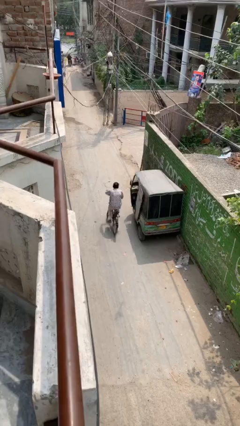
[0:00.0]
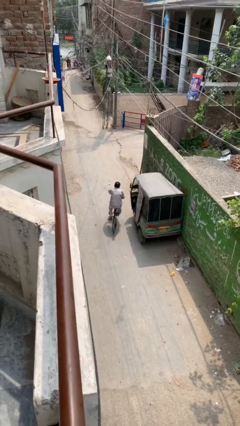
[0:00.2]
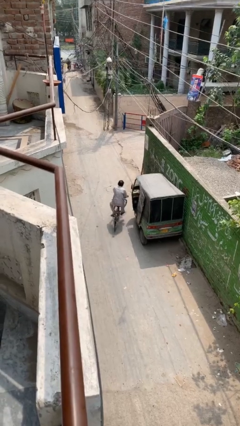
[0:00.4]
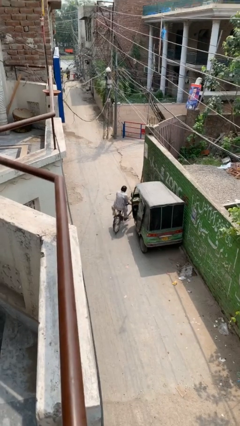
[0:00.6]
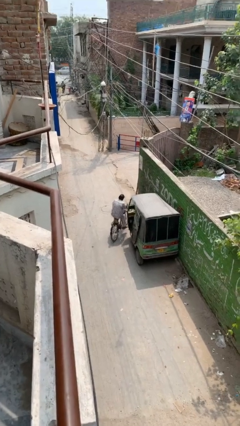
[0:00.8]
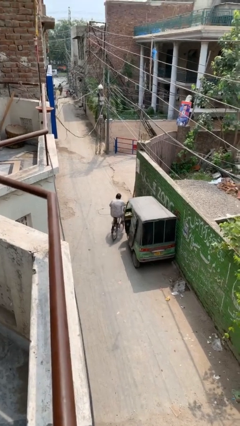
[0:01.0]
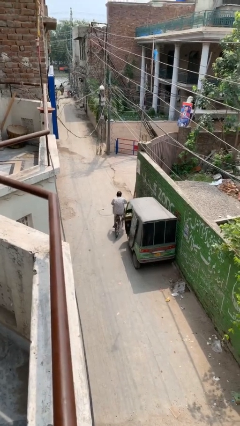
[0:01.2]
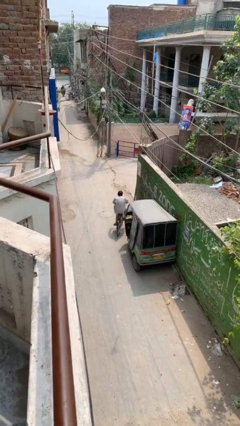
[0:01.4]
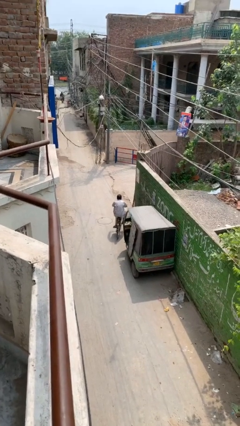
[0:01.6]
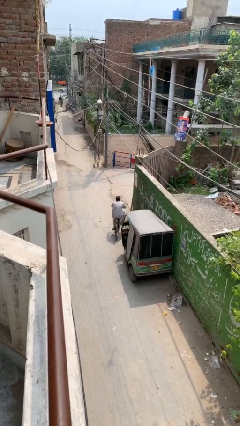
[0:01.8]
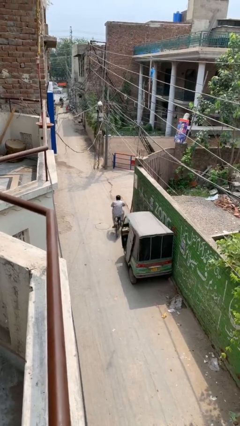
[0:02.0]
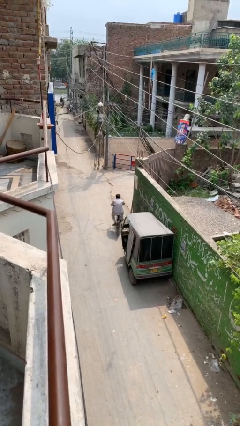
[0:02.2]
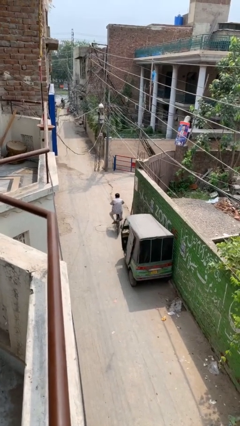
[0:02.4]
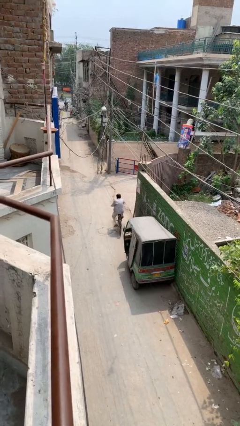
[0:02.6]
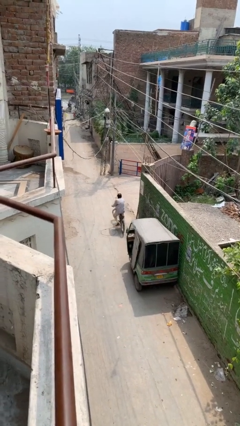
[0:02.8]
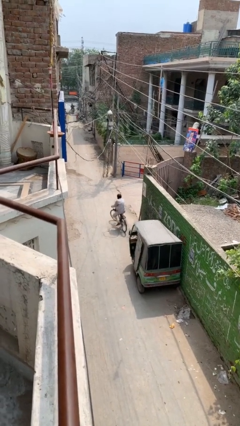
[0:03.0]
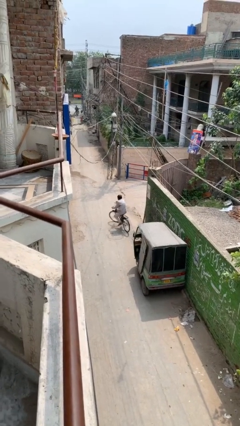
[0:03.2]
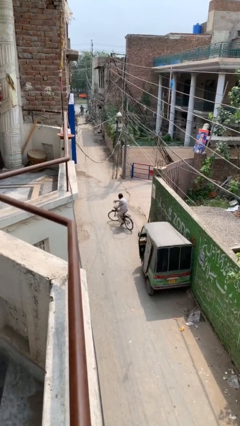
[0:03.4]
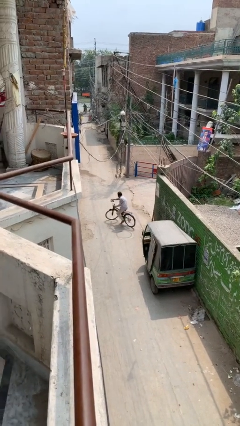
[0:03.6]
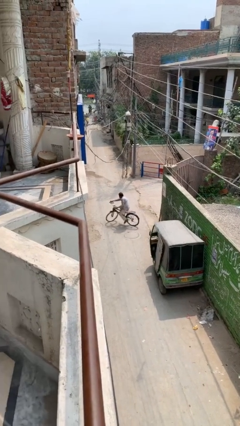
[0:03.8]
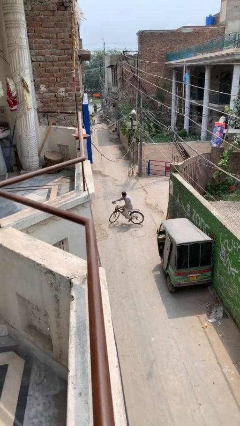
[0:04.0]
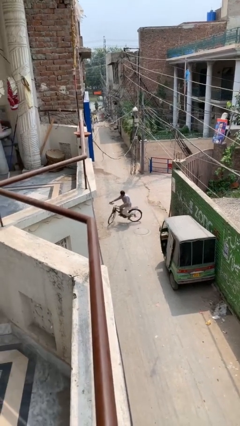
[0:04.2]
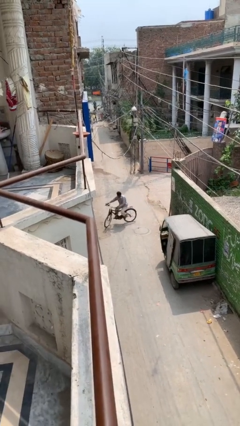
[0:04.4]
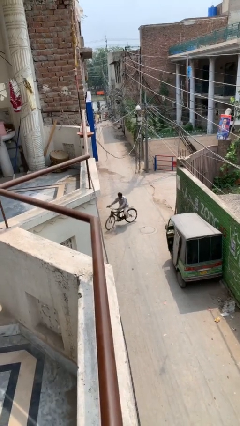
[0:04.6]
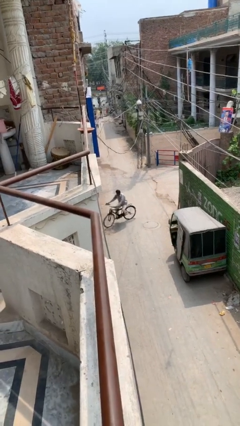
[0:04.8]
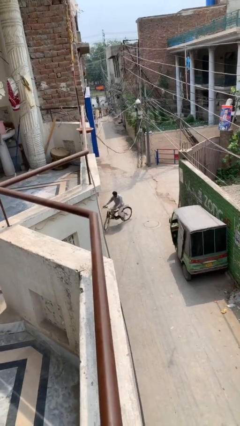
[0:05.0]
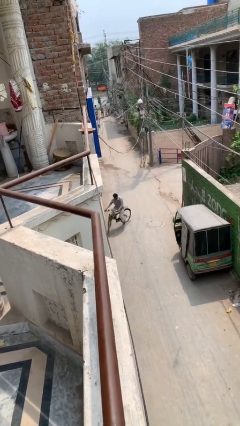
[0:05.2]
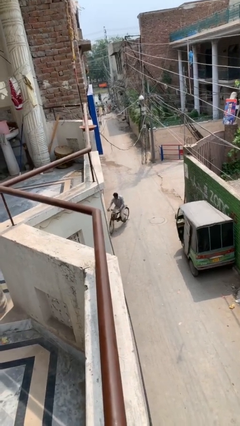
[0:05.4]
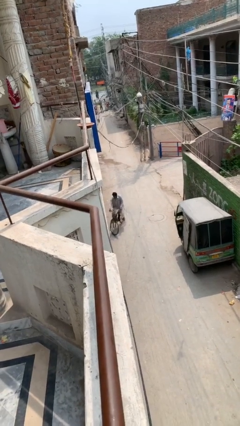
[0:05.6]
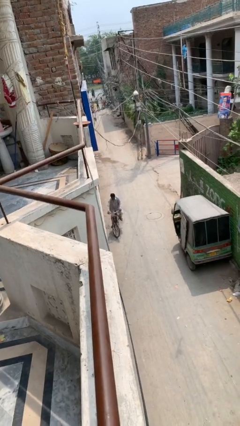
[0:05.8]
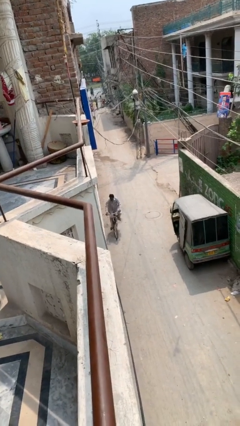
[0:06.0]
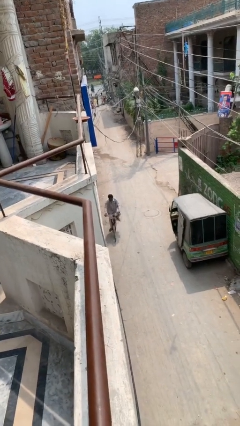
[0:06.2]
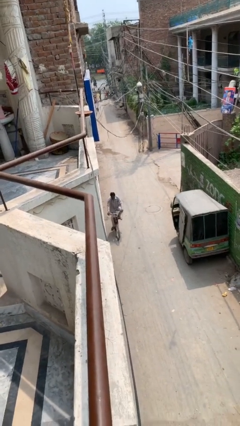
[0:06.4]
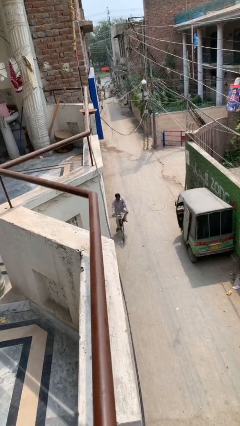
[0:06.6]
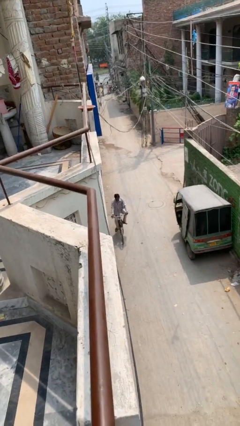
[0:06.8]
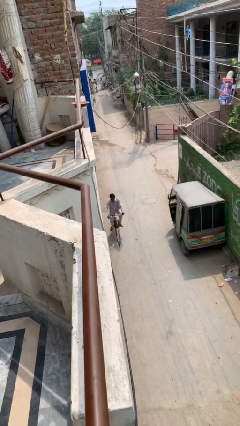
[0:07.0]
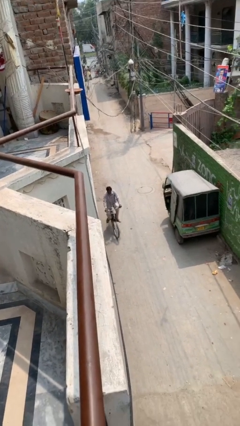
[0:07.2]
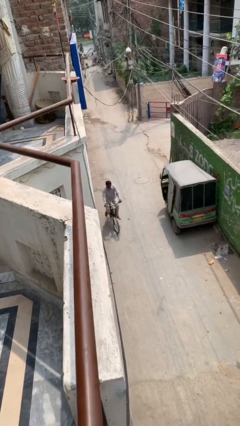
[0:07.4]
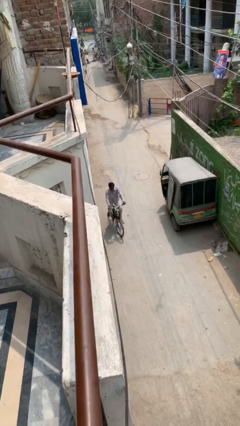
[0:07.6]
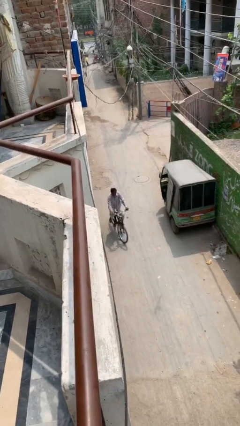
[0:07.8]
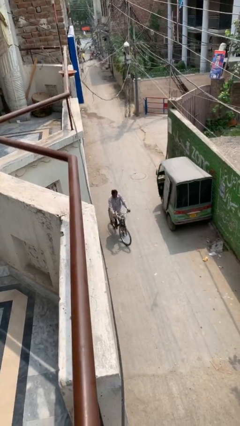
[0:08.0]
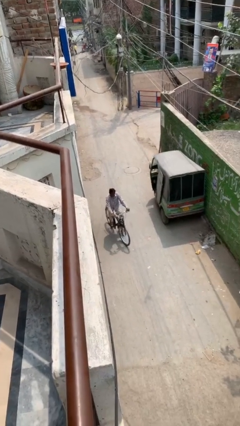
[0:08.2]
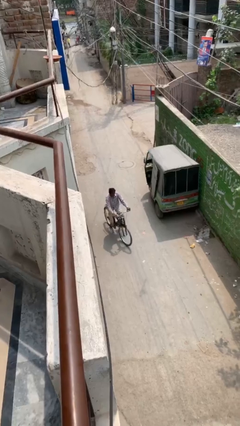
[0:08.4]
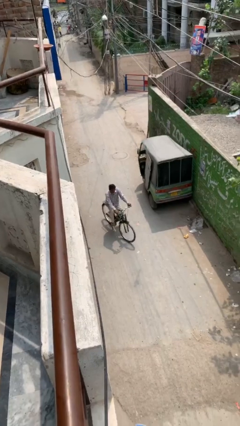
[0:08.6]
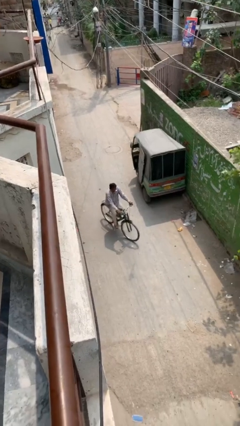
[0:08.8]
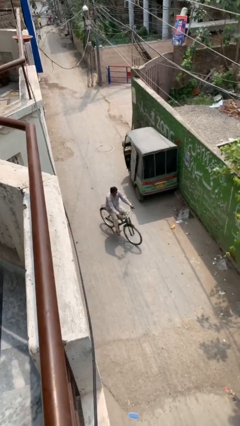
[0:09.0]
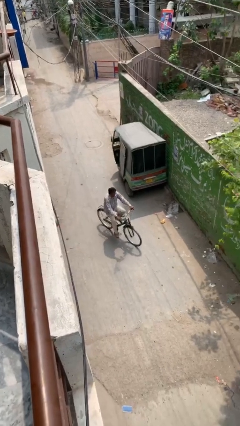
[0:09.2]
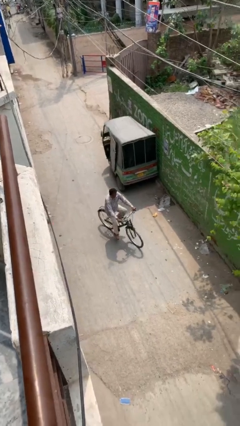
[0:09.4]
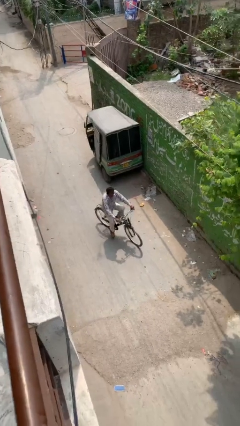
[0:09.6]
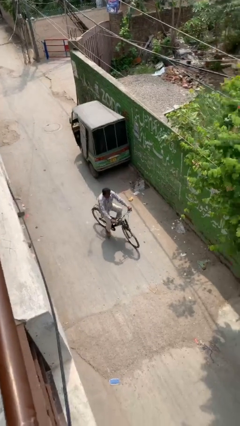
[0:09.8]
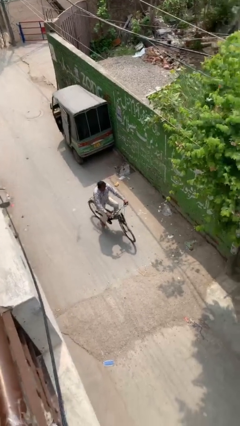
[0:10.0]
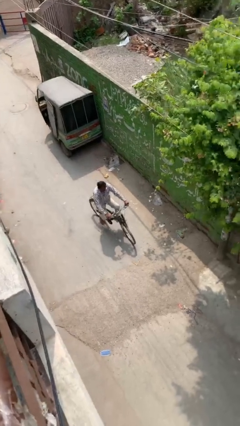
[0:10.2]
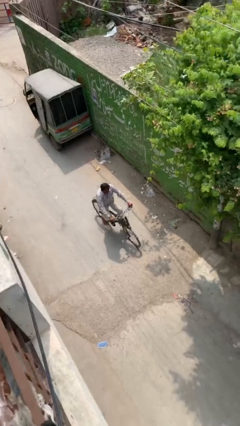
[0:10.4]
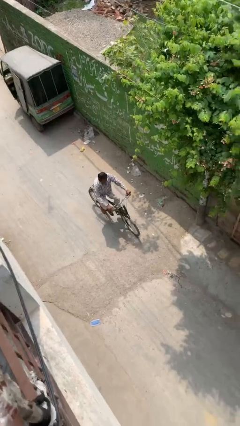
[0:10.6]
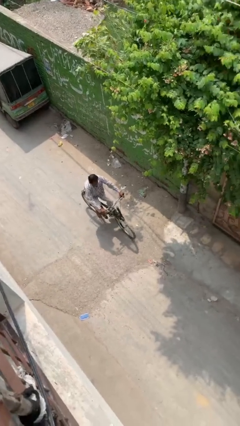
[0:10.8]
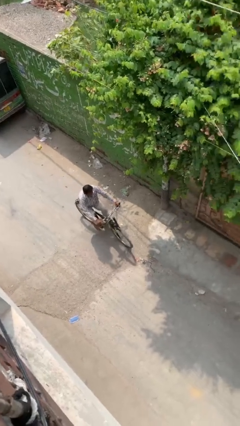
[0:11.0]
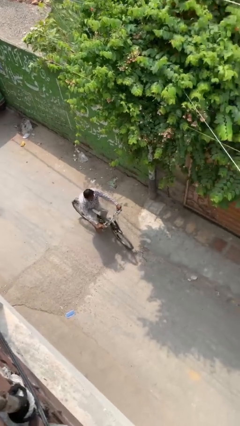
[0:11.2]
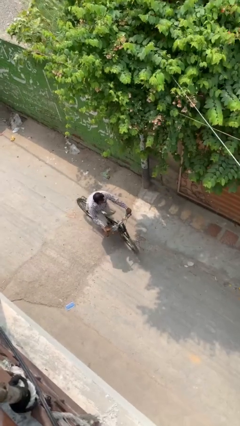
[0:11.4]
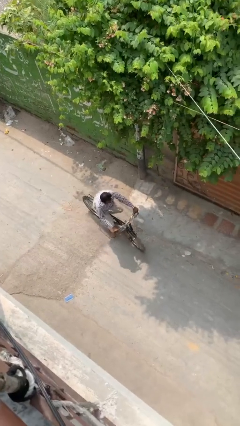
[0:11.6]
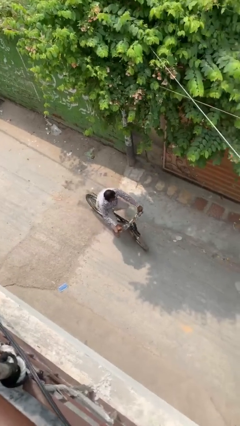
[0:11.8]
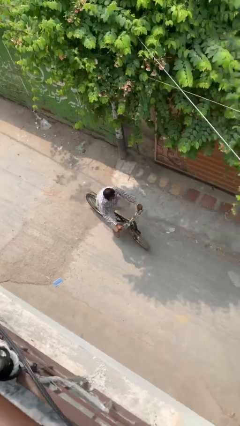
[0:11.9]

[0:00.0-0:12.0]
person rides bicycle

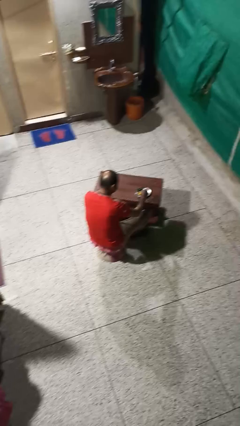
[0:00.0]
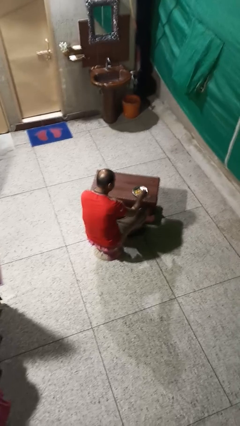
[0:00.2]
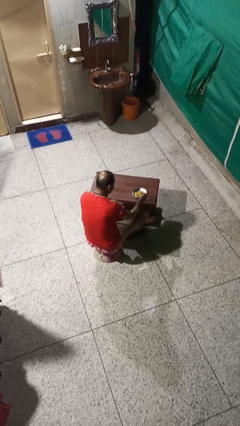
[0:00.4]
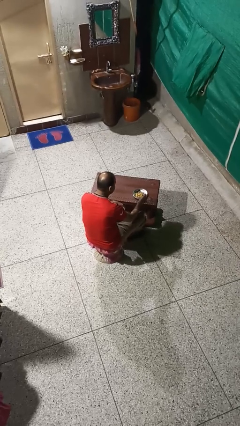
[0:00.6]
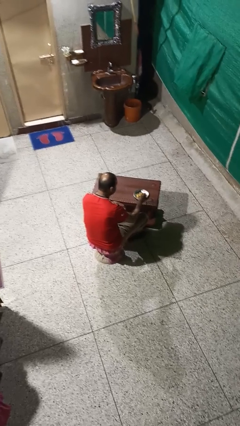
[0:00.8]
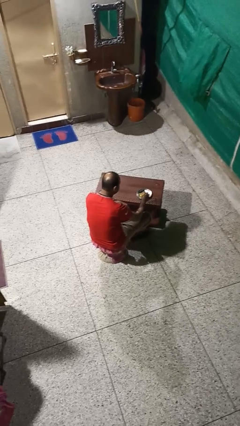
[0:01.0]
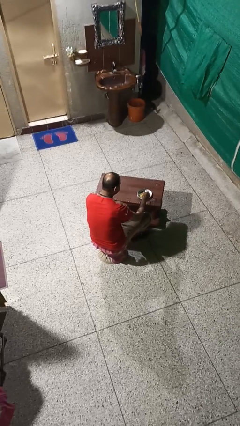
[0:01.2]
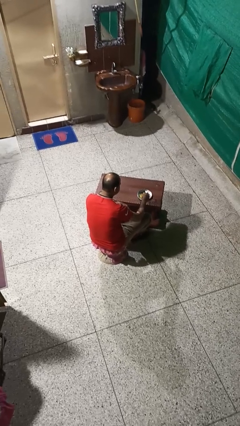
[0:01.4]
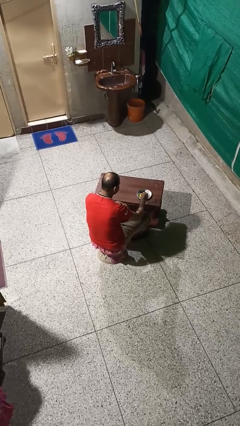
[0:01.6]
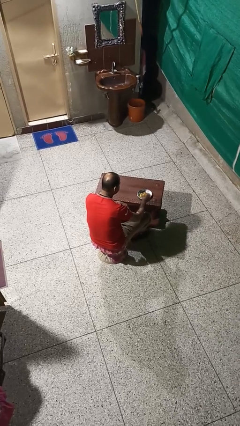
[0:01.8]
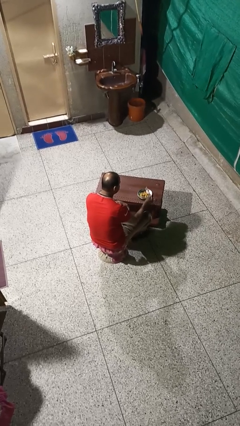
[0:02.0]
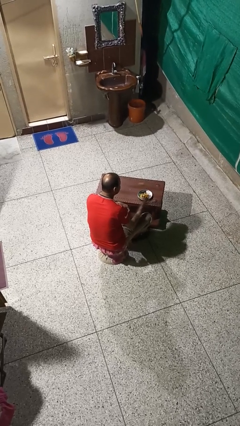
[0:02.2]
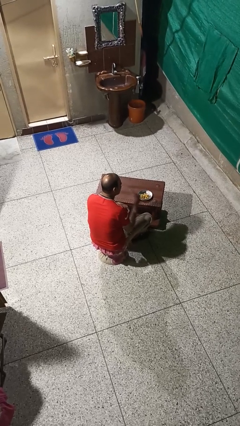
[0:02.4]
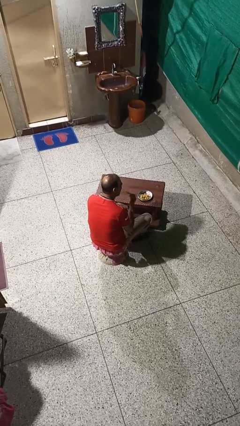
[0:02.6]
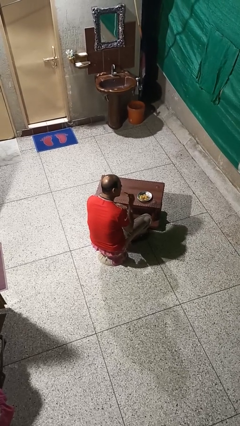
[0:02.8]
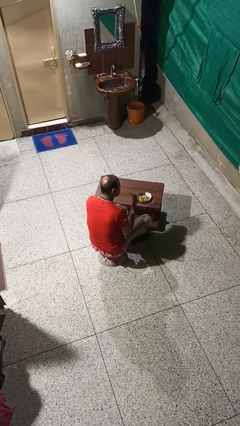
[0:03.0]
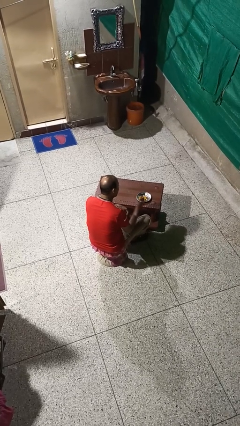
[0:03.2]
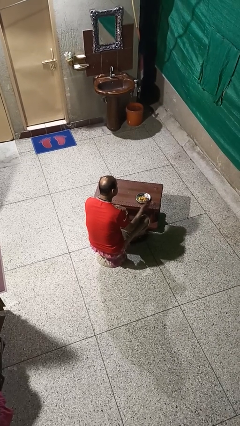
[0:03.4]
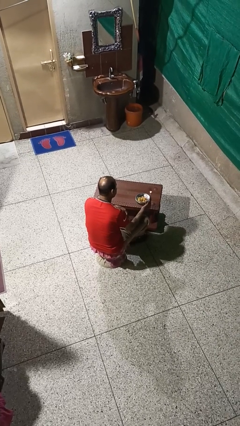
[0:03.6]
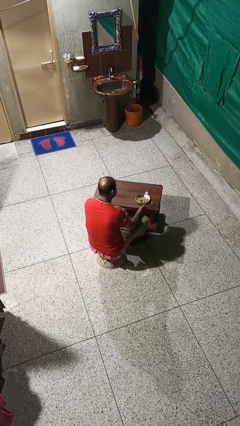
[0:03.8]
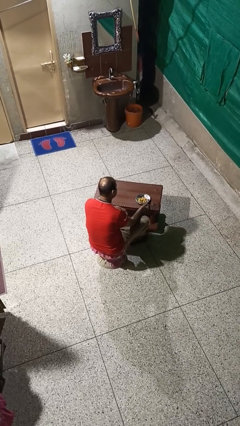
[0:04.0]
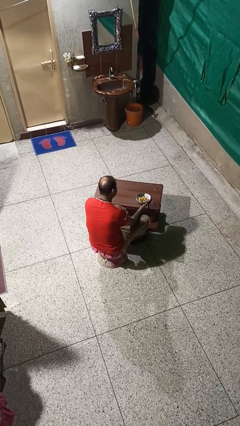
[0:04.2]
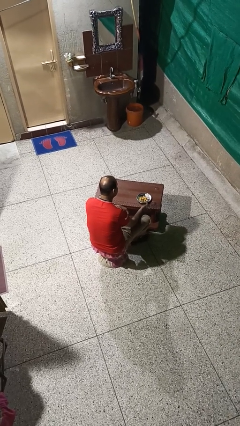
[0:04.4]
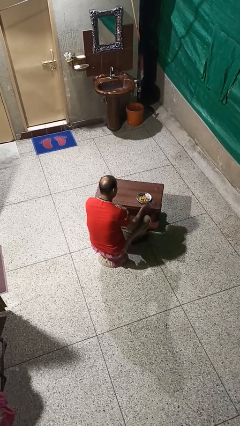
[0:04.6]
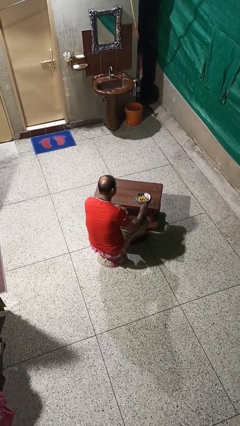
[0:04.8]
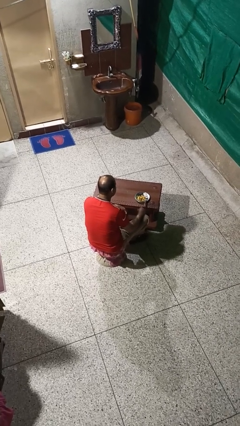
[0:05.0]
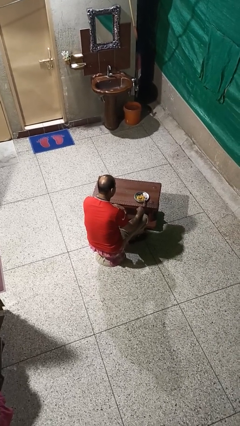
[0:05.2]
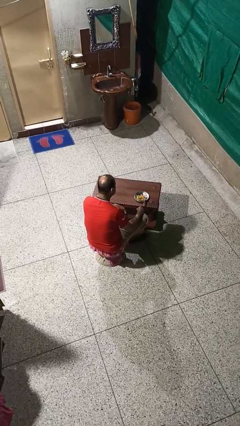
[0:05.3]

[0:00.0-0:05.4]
person eats with utensil

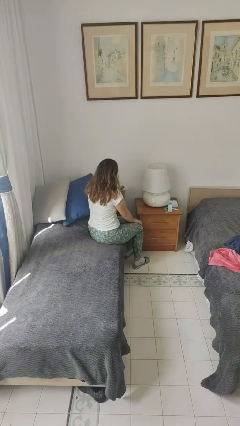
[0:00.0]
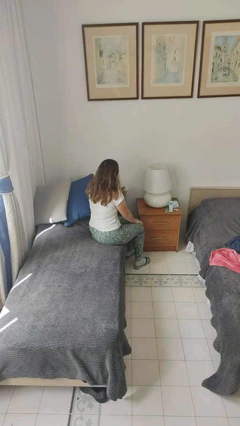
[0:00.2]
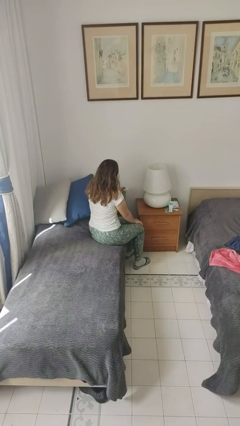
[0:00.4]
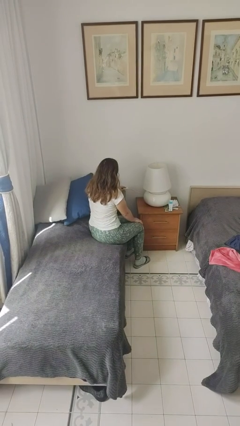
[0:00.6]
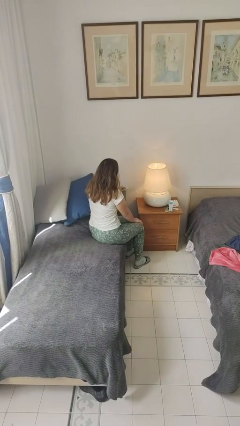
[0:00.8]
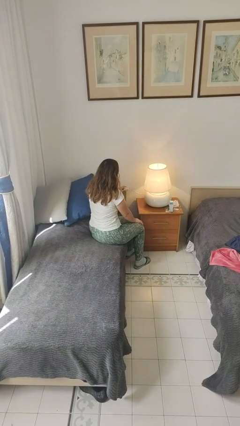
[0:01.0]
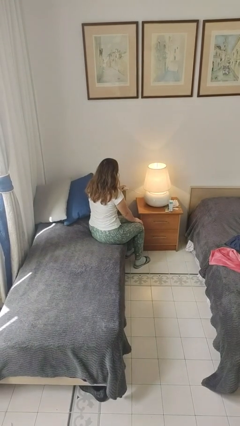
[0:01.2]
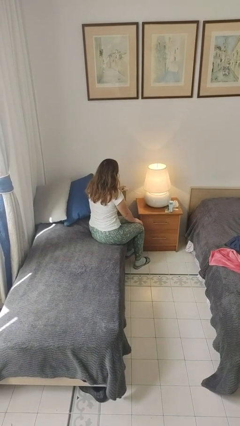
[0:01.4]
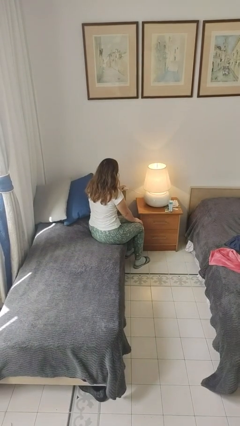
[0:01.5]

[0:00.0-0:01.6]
person turns on lamp
